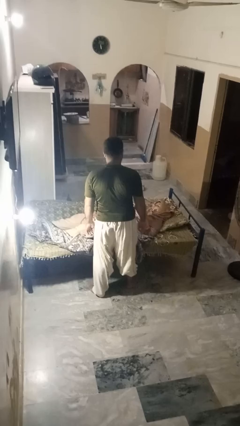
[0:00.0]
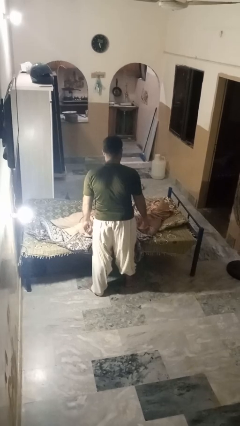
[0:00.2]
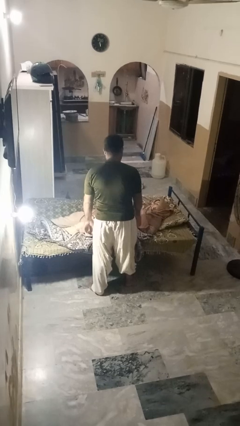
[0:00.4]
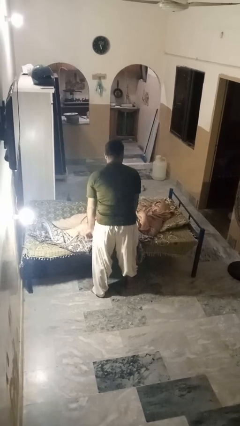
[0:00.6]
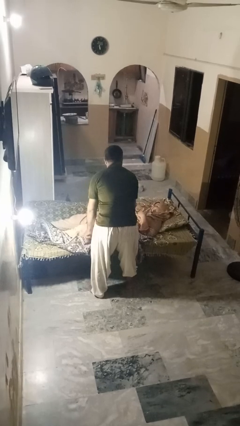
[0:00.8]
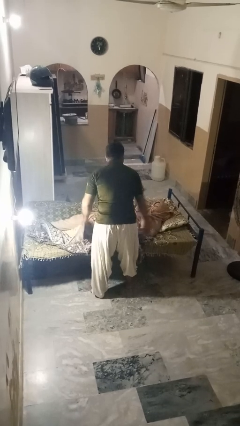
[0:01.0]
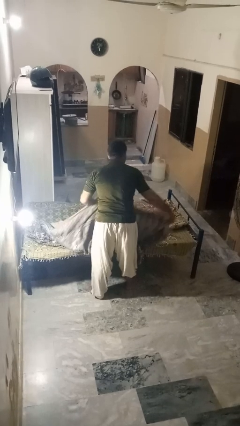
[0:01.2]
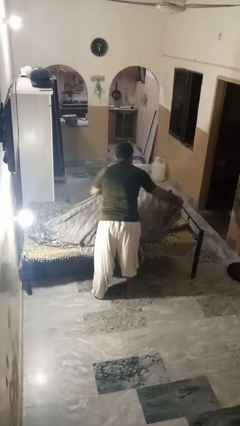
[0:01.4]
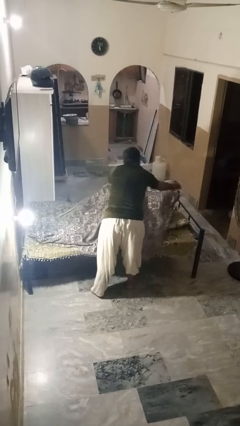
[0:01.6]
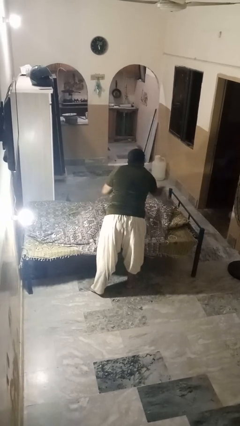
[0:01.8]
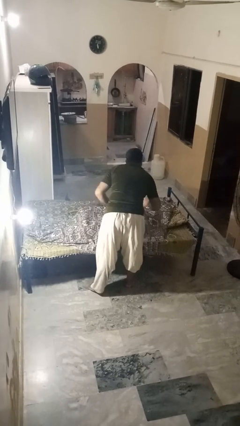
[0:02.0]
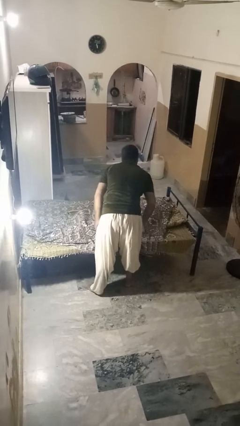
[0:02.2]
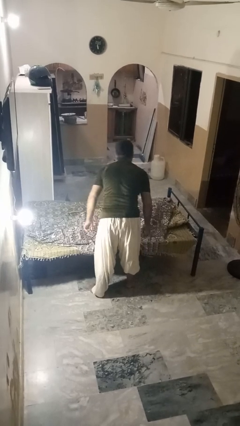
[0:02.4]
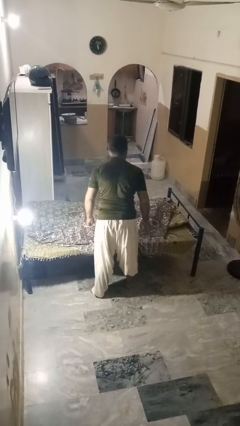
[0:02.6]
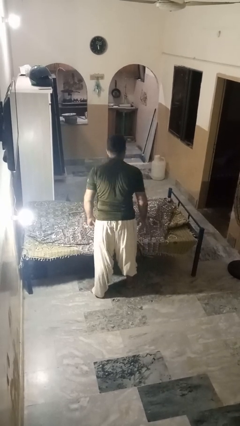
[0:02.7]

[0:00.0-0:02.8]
person covers friend with blanket

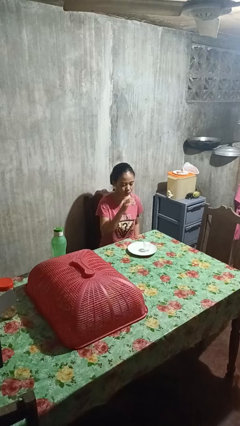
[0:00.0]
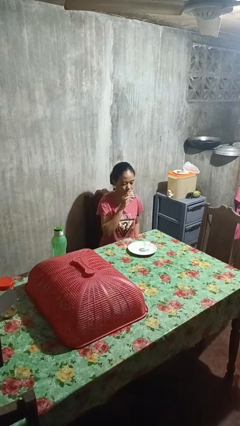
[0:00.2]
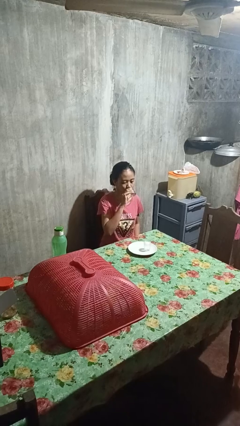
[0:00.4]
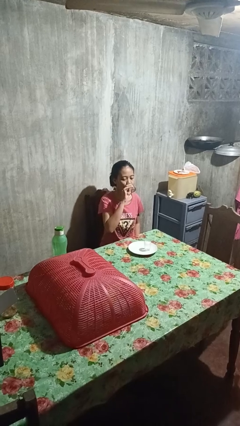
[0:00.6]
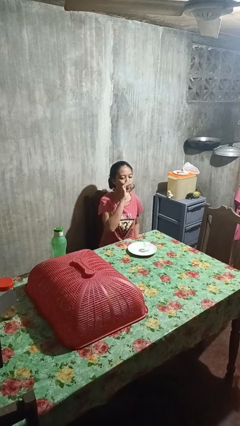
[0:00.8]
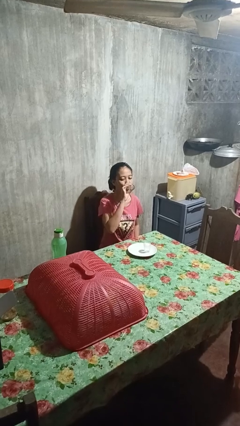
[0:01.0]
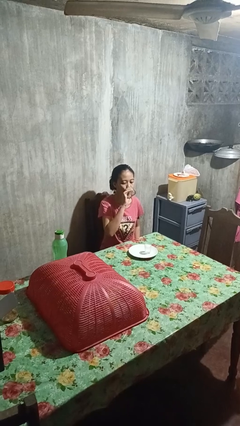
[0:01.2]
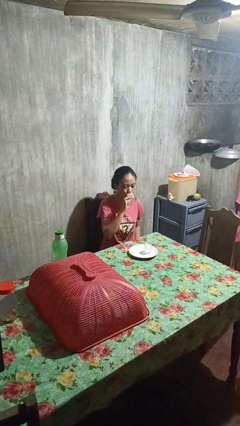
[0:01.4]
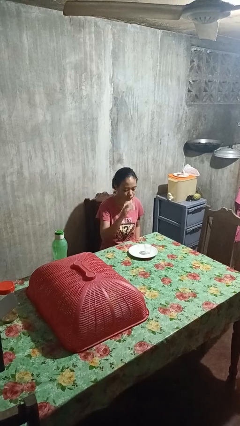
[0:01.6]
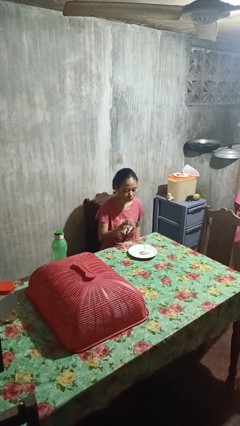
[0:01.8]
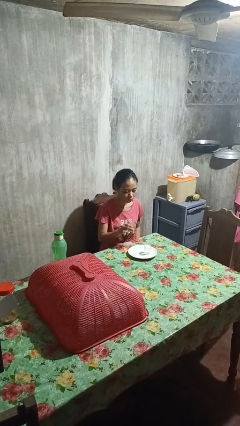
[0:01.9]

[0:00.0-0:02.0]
person drinks from shotglass

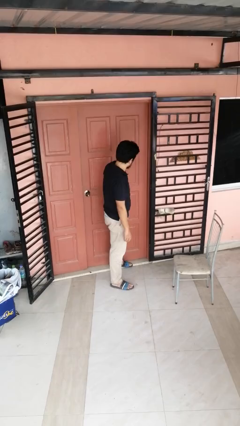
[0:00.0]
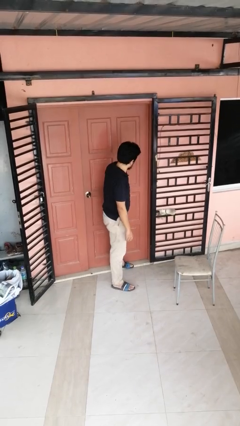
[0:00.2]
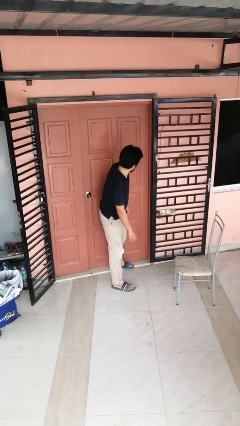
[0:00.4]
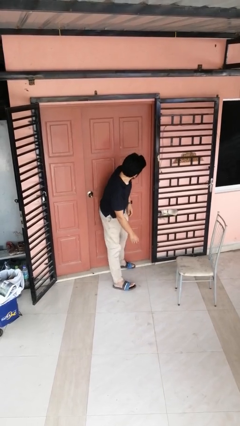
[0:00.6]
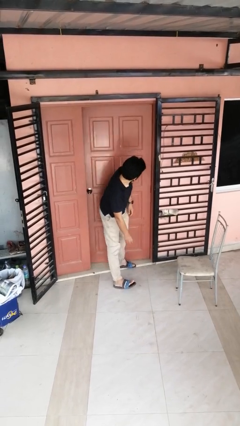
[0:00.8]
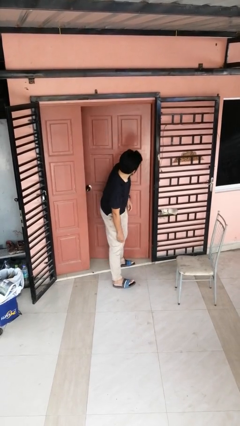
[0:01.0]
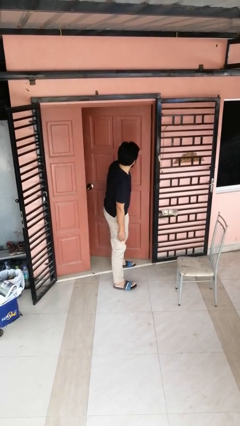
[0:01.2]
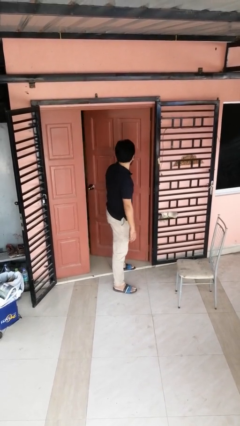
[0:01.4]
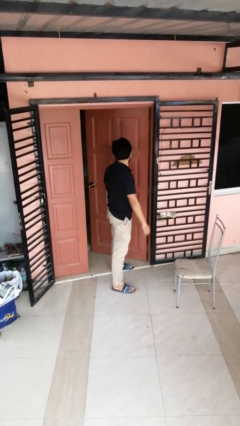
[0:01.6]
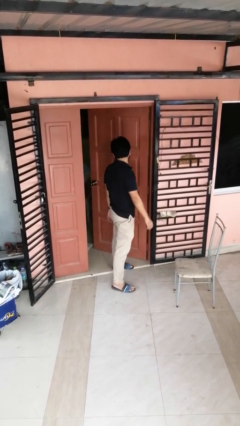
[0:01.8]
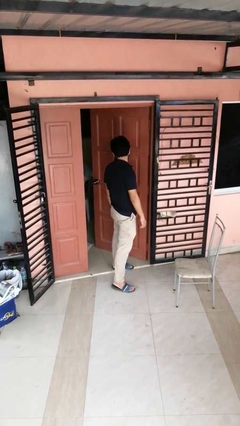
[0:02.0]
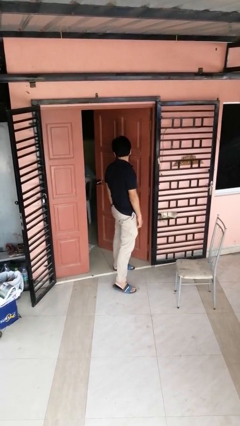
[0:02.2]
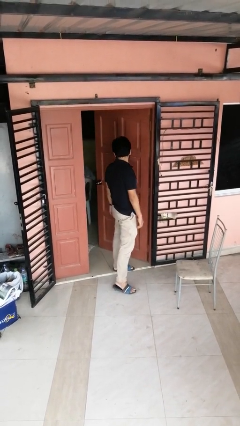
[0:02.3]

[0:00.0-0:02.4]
person opens facility door

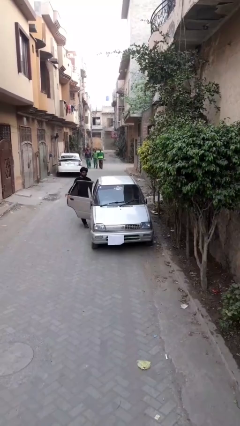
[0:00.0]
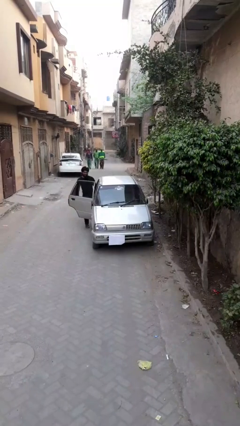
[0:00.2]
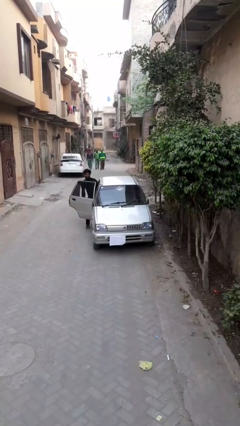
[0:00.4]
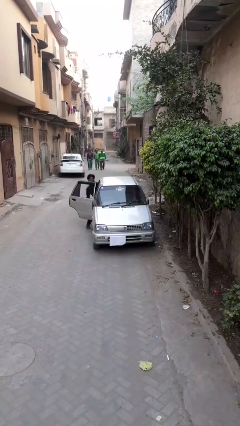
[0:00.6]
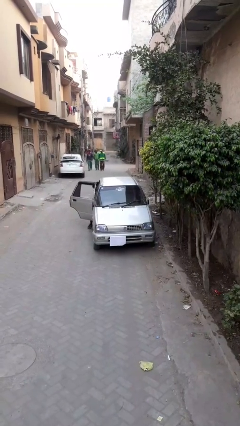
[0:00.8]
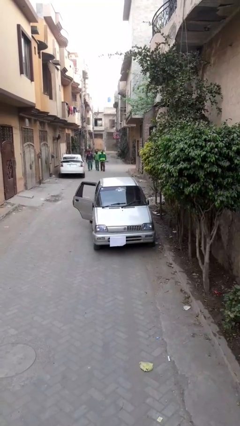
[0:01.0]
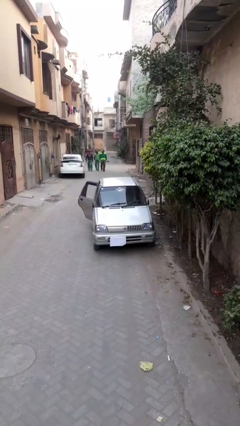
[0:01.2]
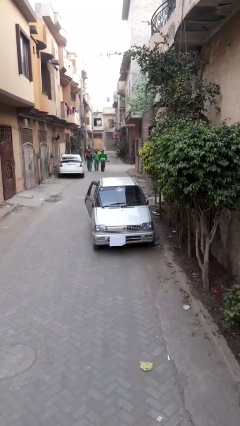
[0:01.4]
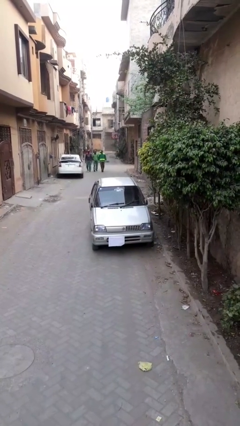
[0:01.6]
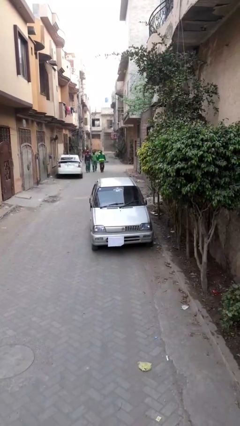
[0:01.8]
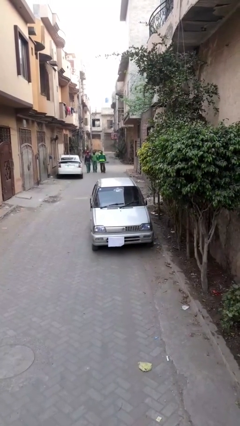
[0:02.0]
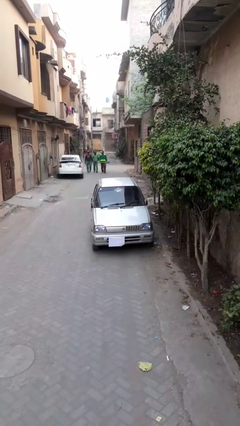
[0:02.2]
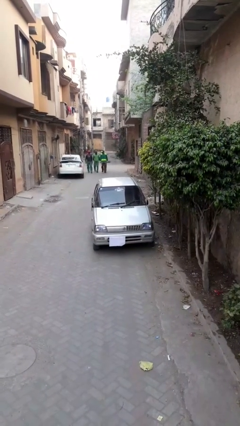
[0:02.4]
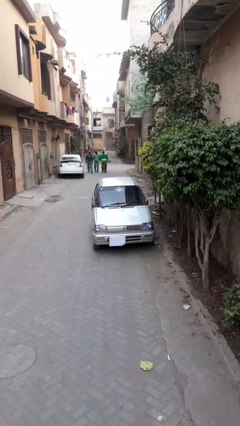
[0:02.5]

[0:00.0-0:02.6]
car picks up person

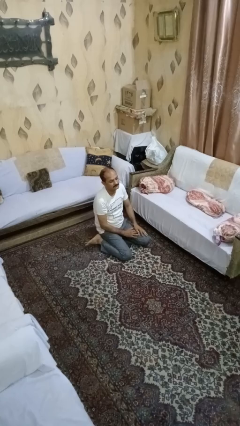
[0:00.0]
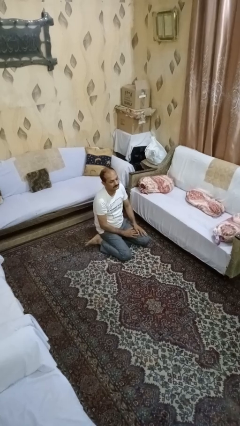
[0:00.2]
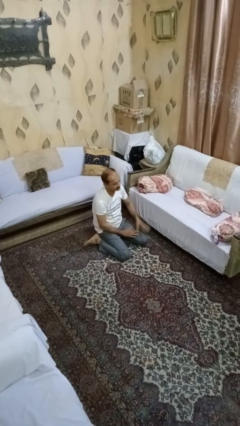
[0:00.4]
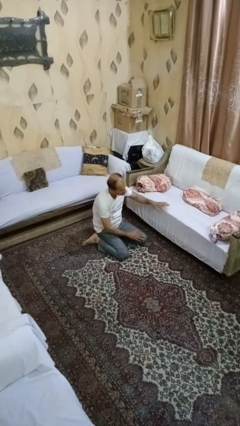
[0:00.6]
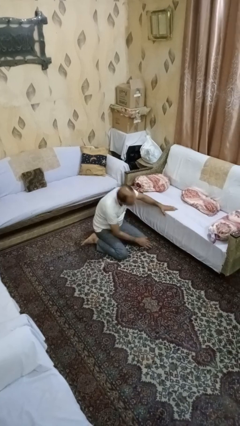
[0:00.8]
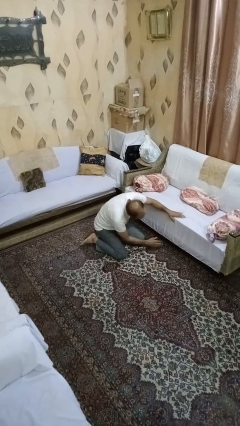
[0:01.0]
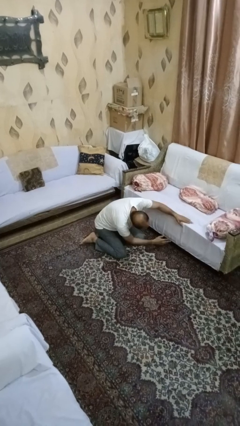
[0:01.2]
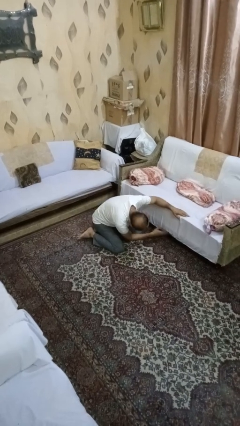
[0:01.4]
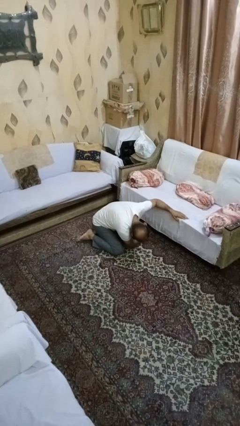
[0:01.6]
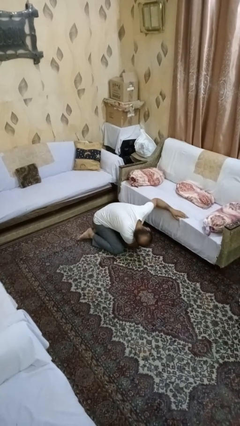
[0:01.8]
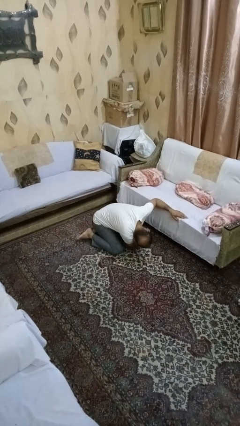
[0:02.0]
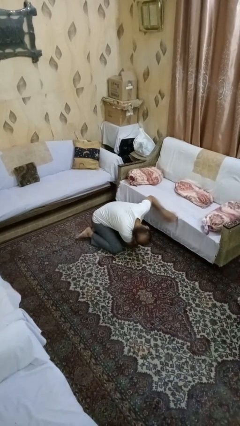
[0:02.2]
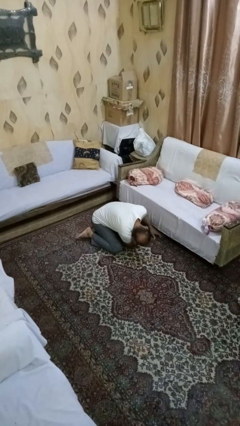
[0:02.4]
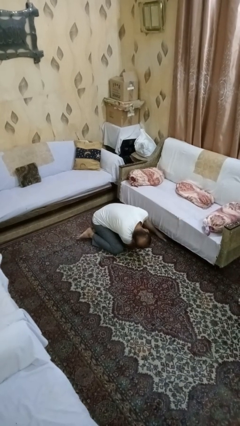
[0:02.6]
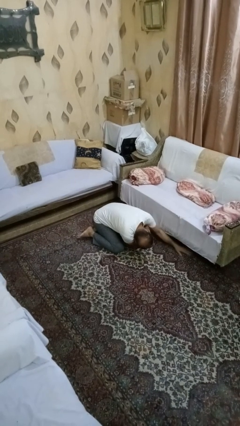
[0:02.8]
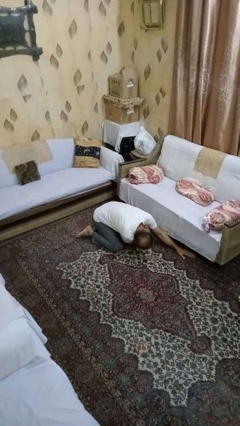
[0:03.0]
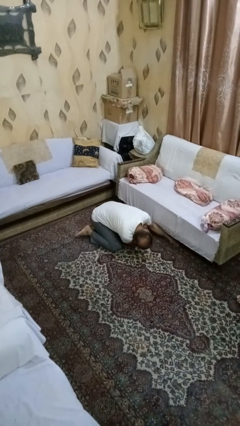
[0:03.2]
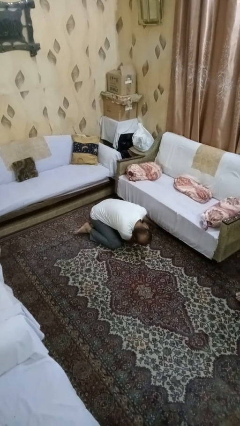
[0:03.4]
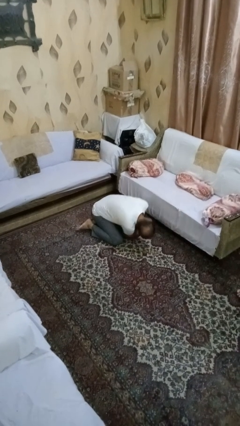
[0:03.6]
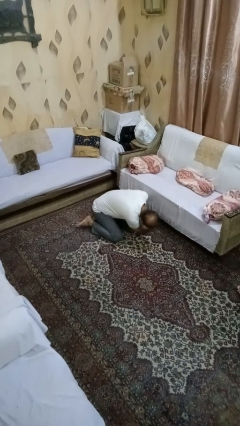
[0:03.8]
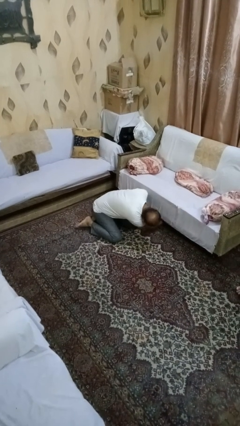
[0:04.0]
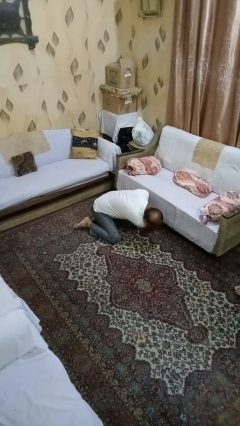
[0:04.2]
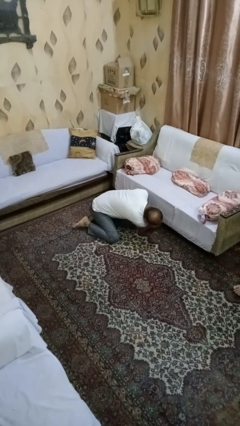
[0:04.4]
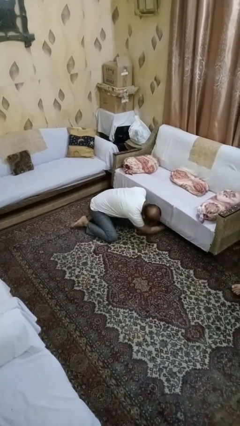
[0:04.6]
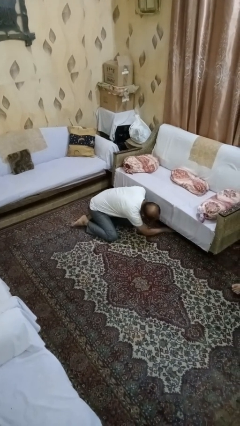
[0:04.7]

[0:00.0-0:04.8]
person searches under couch

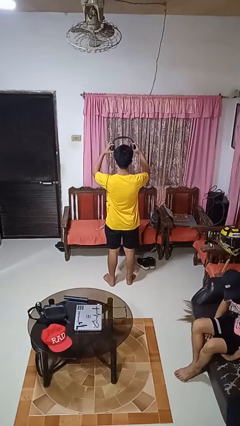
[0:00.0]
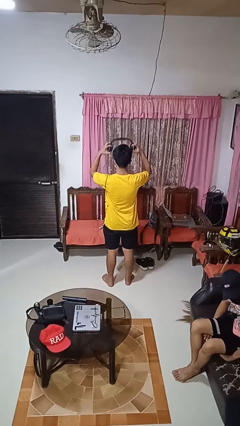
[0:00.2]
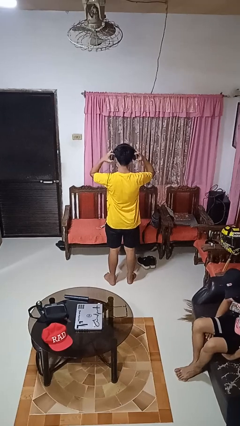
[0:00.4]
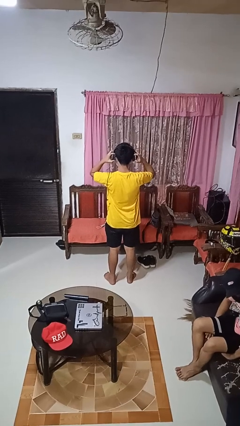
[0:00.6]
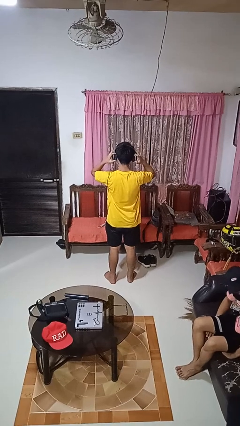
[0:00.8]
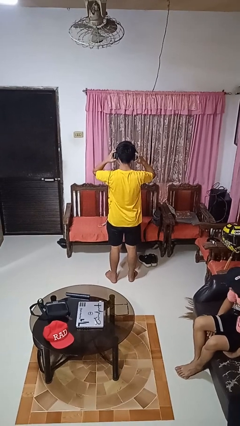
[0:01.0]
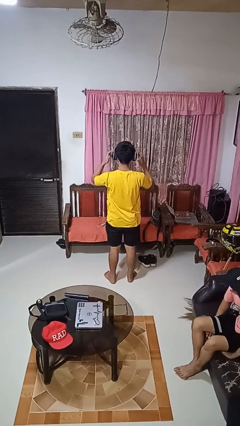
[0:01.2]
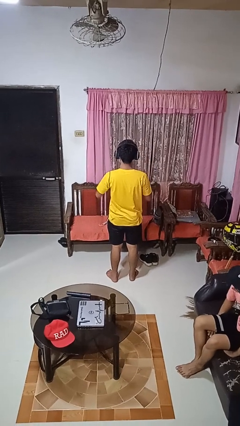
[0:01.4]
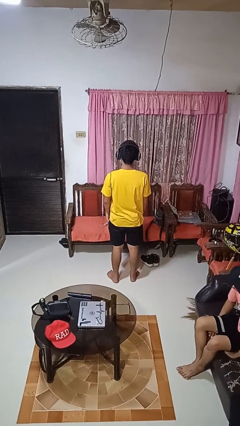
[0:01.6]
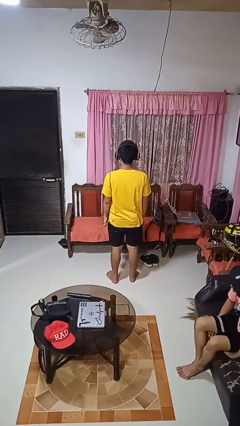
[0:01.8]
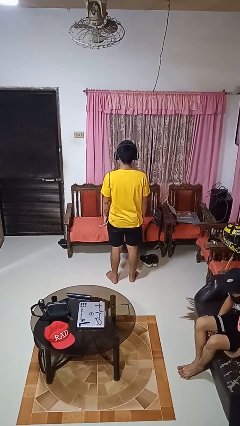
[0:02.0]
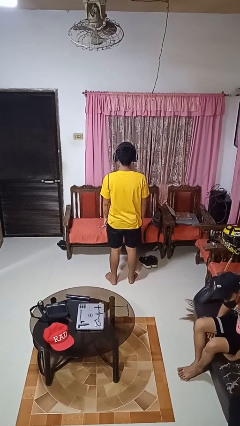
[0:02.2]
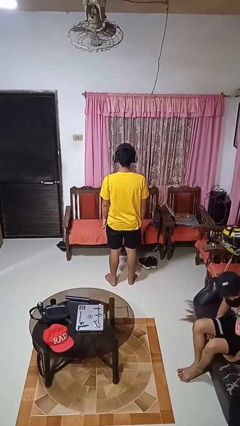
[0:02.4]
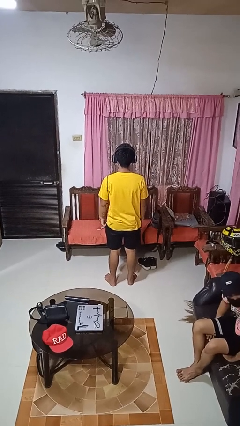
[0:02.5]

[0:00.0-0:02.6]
person puts on headphones

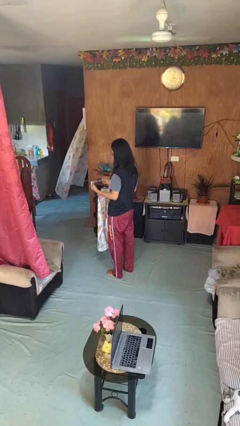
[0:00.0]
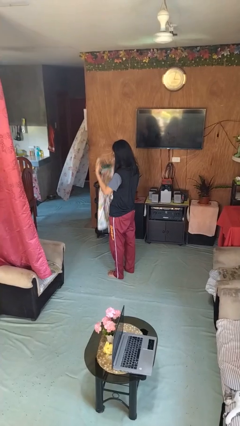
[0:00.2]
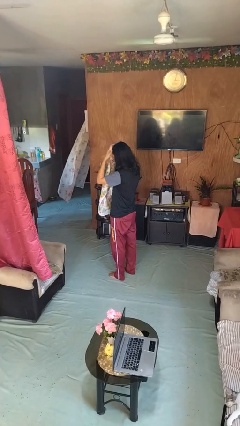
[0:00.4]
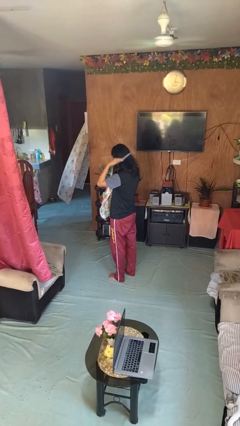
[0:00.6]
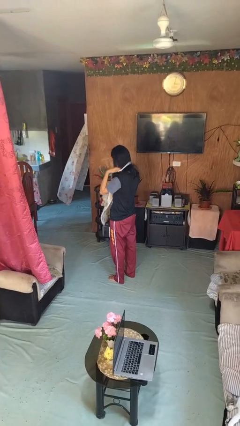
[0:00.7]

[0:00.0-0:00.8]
person puts on apron
